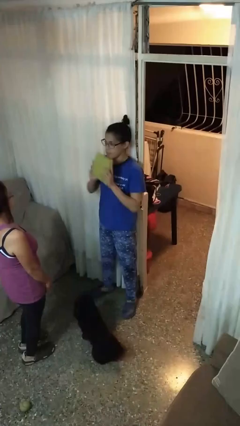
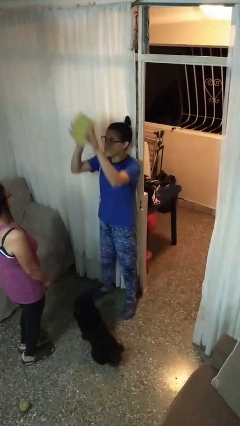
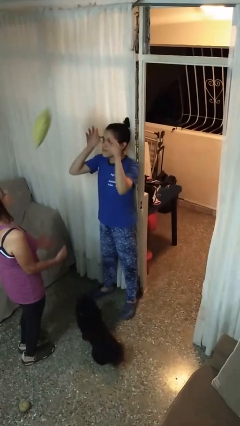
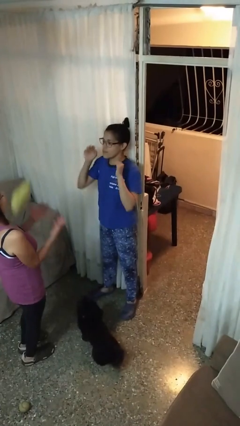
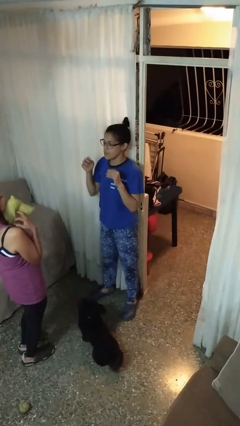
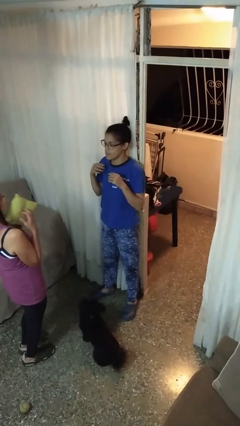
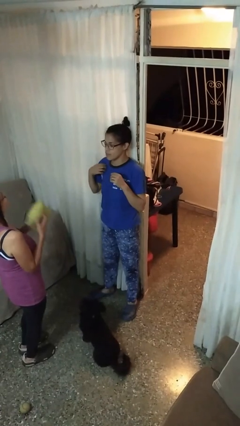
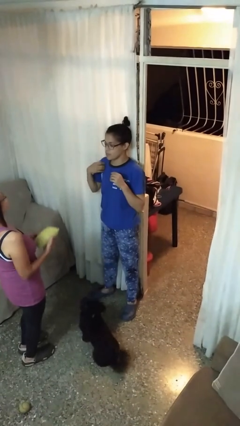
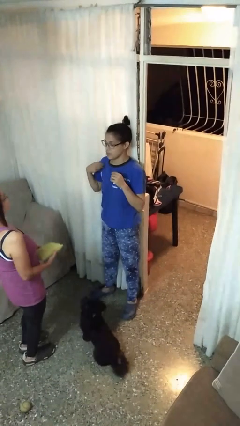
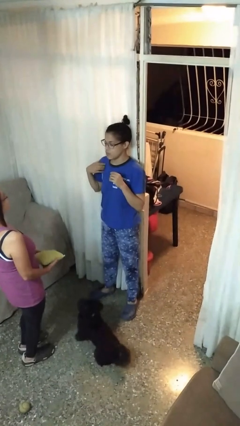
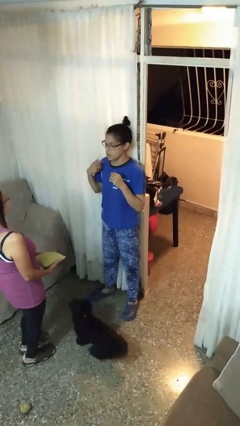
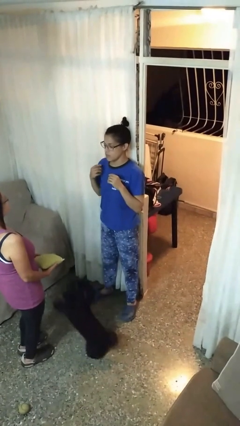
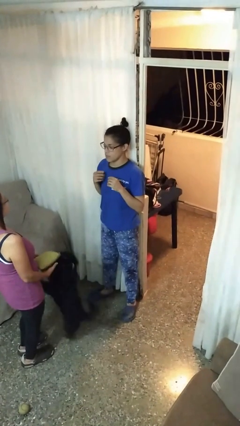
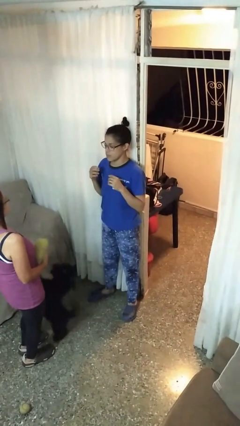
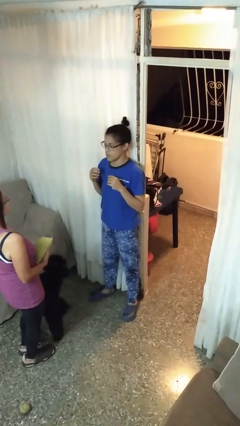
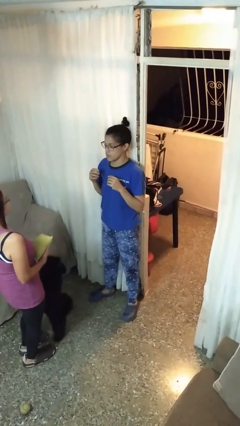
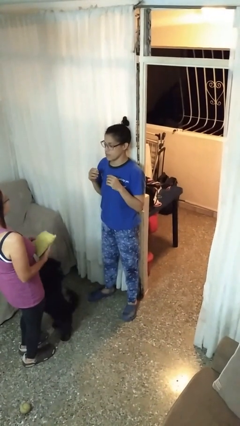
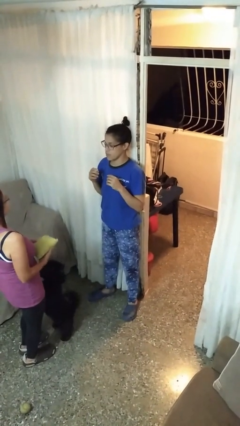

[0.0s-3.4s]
person throws object to person

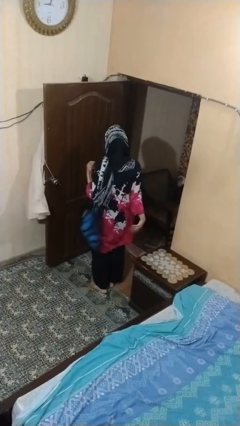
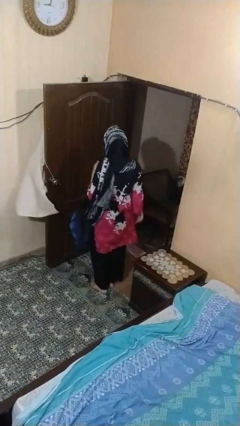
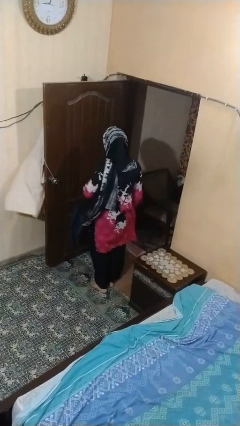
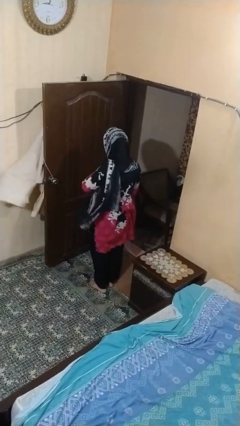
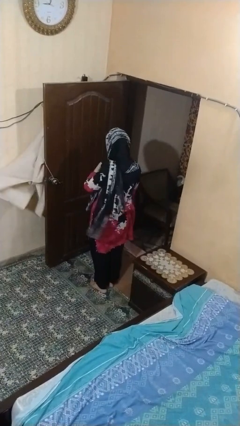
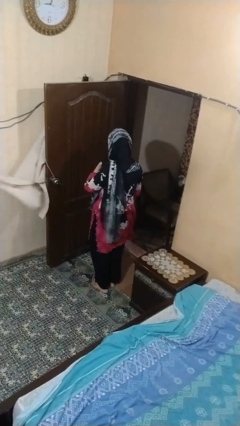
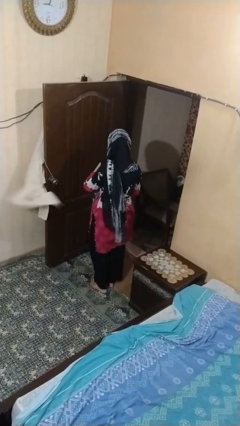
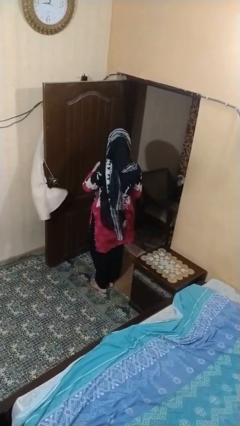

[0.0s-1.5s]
person takes off backpack

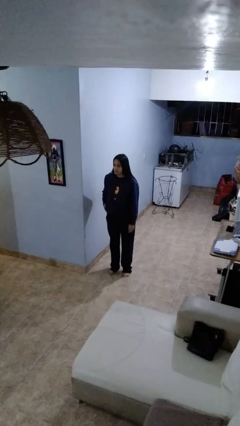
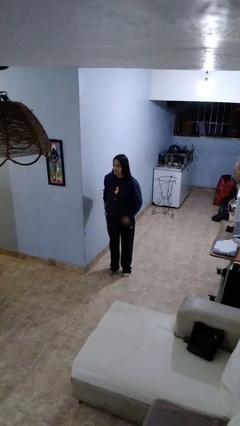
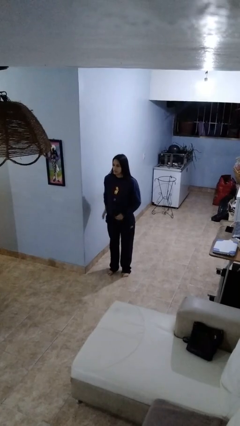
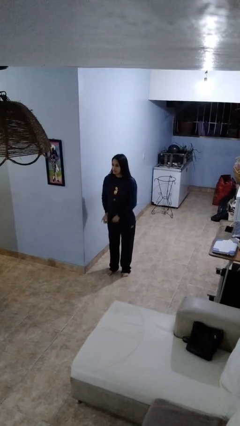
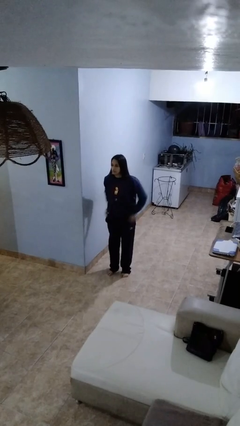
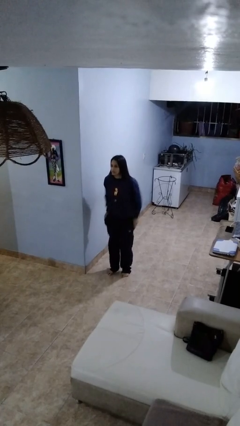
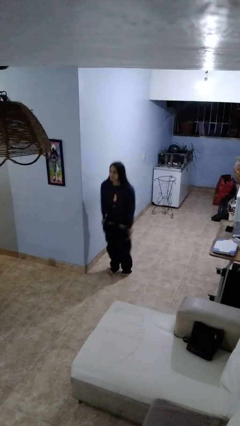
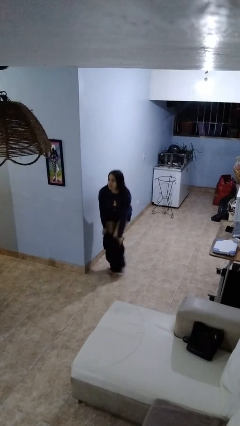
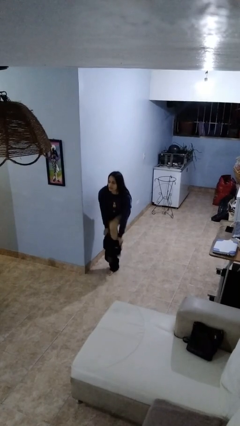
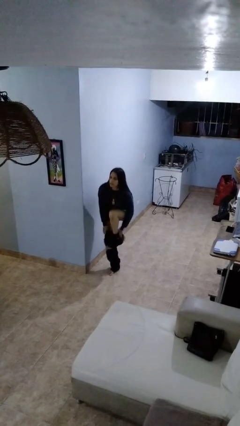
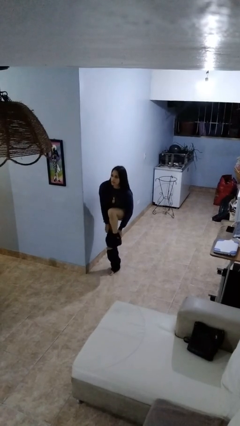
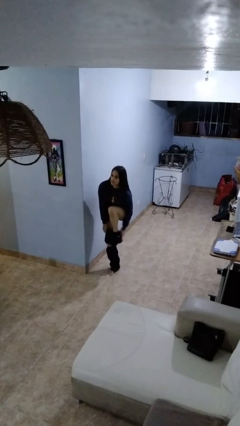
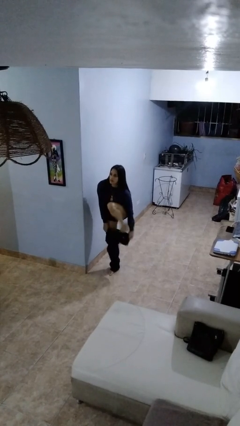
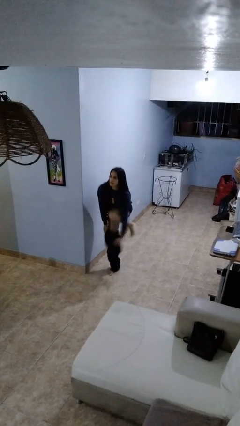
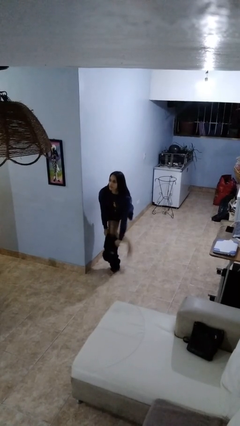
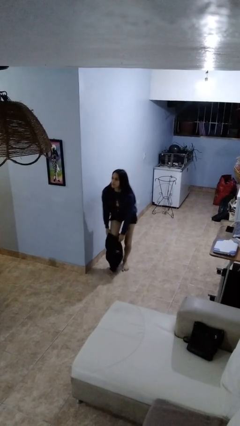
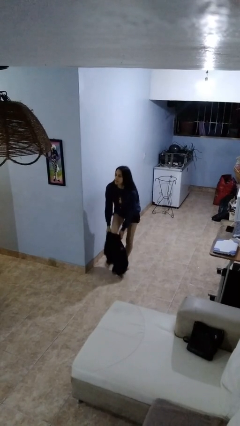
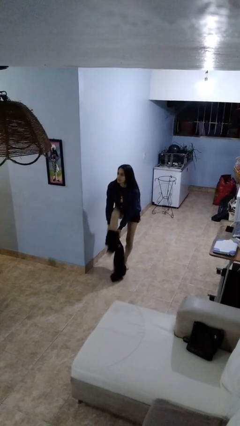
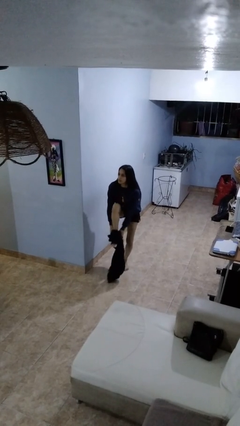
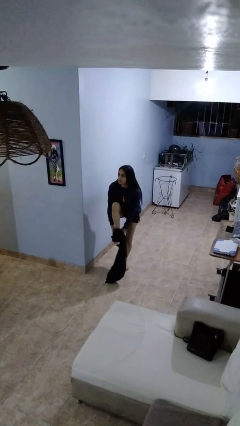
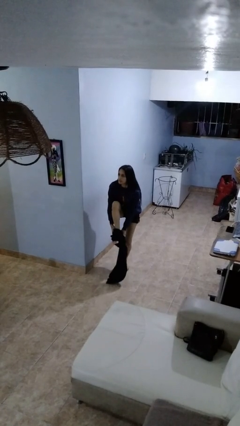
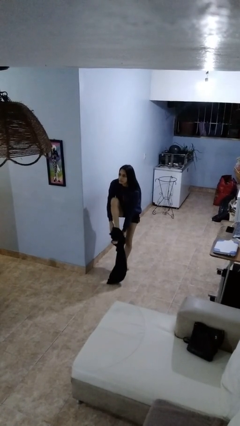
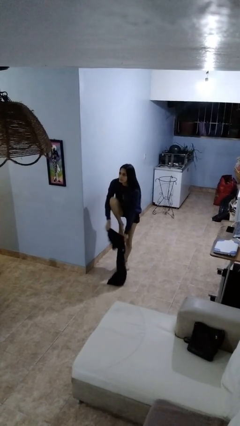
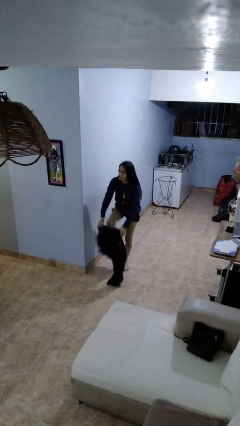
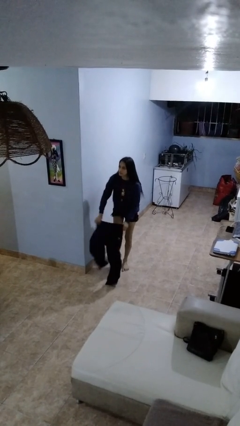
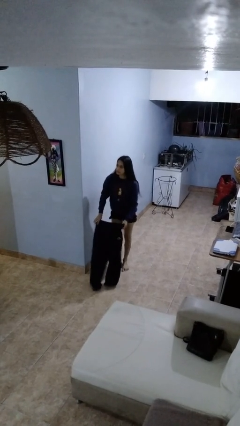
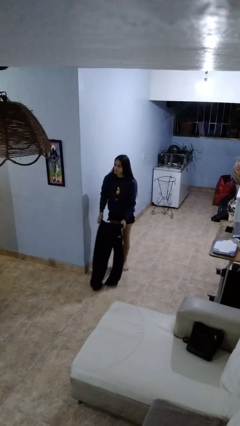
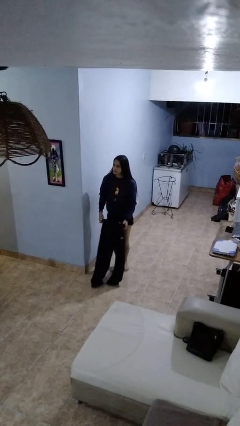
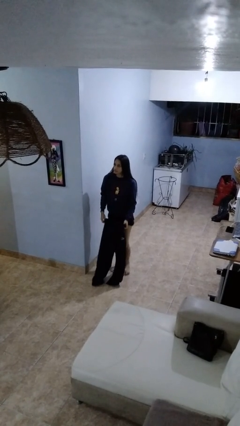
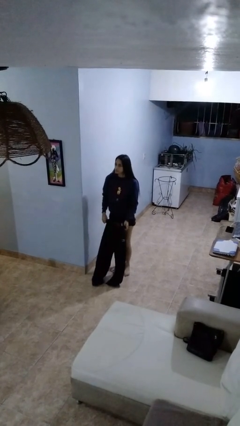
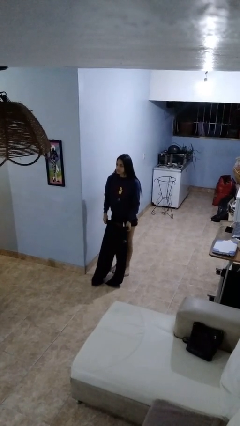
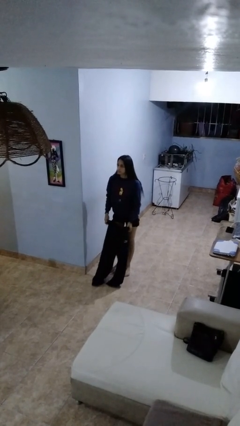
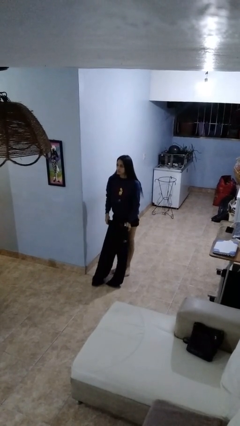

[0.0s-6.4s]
person takes off pants

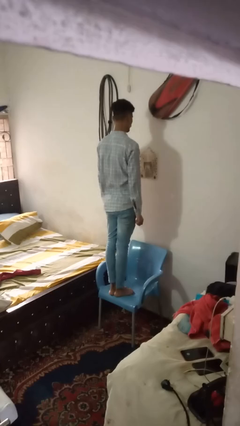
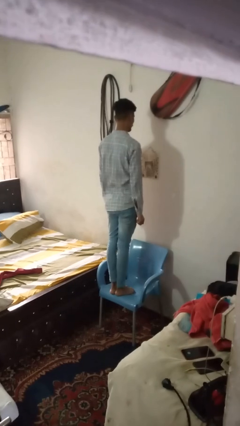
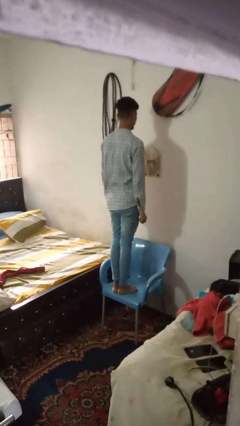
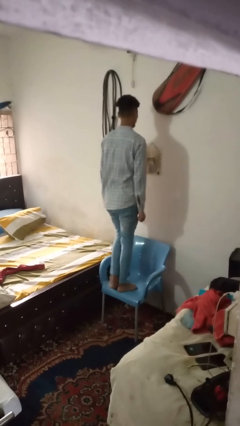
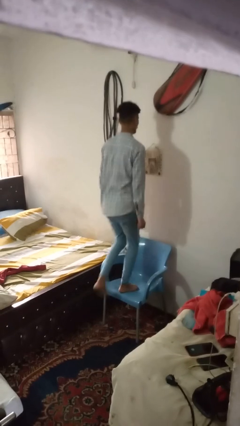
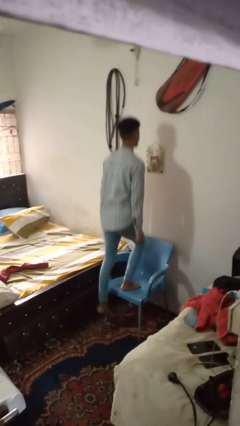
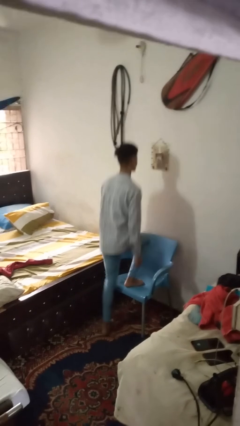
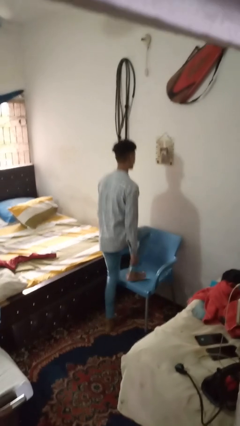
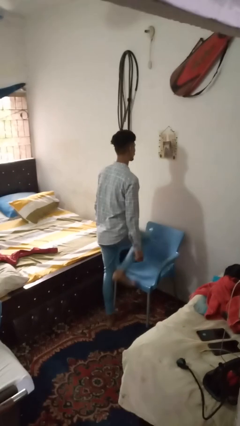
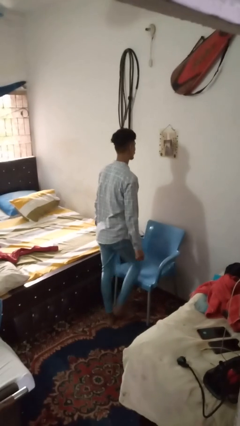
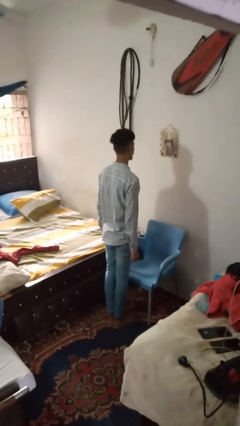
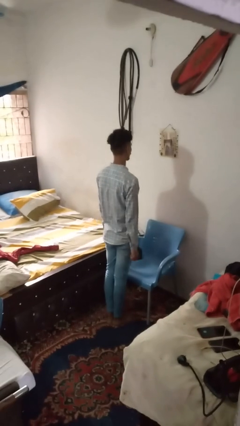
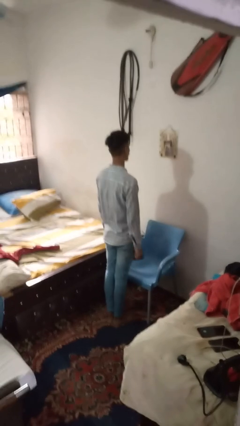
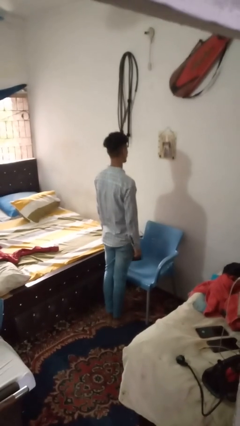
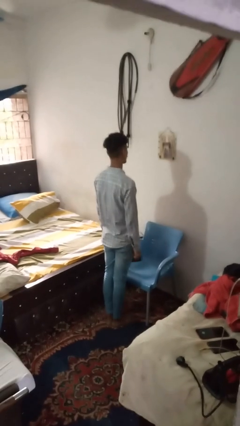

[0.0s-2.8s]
person climbs off chair

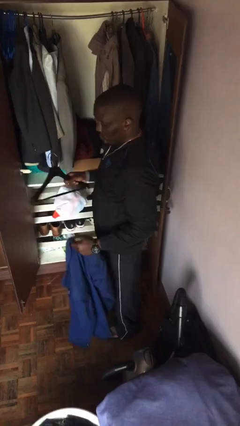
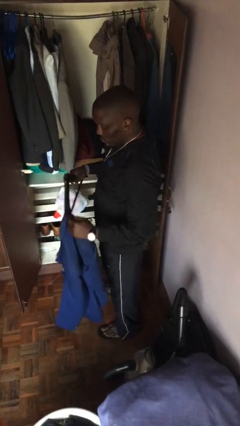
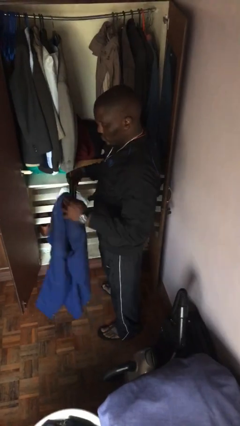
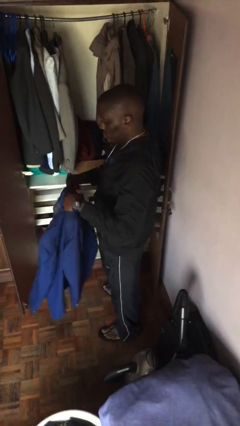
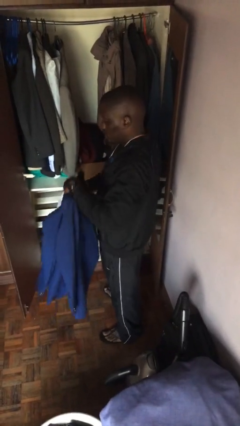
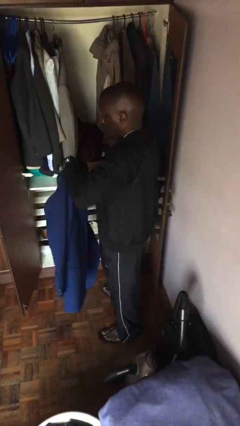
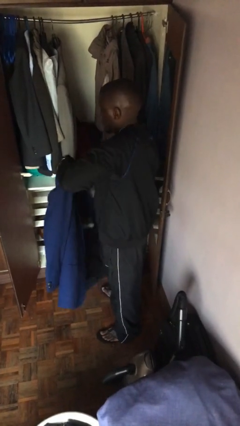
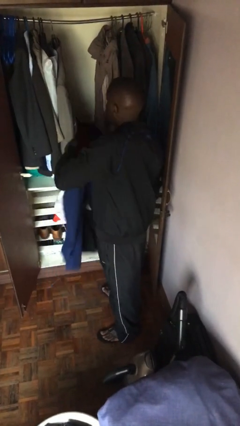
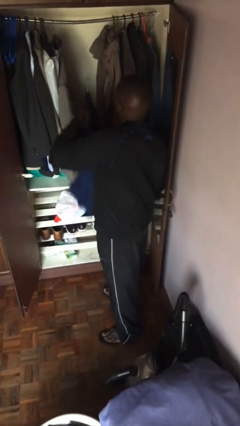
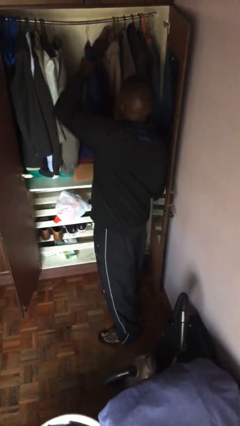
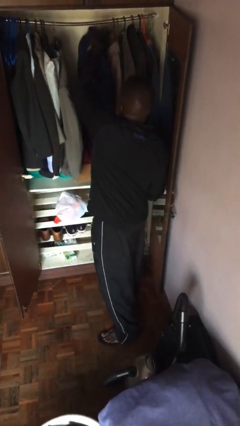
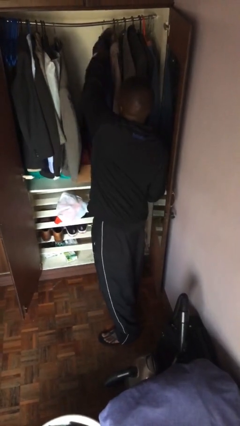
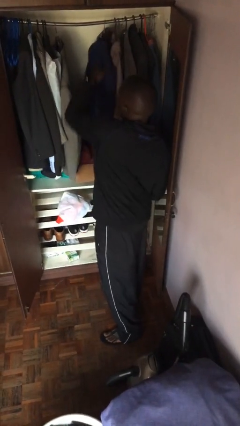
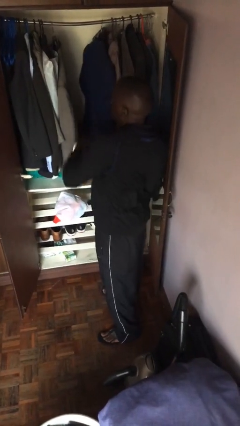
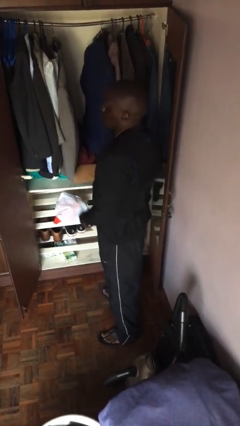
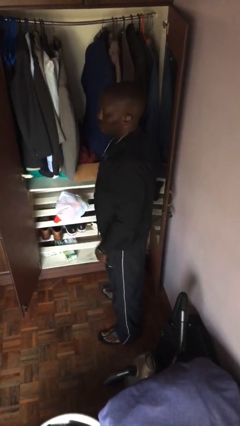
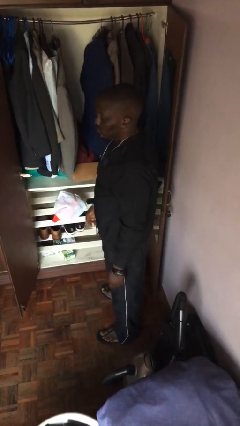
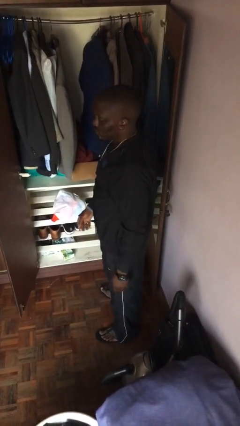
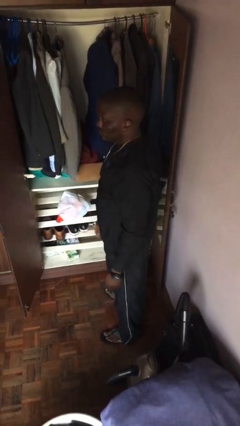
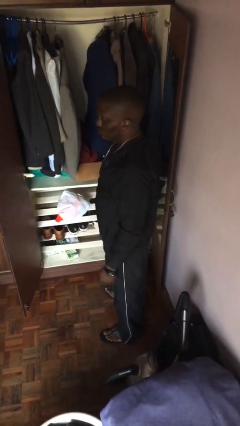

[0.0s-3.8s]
person puts clothes into closet

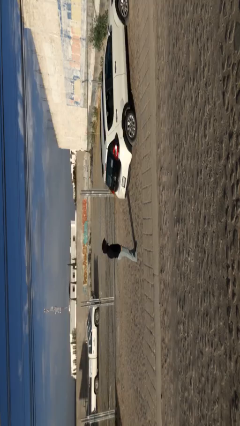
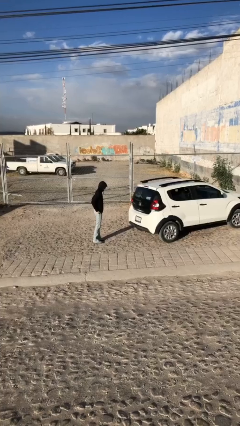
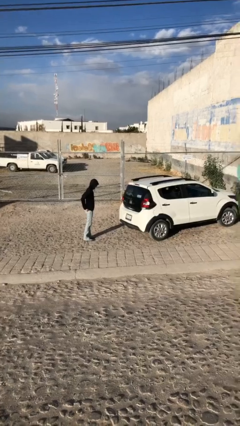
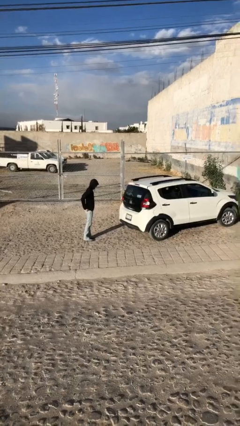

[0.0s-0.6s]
person opens car trunk
